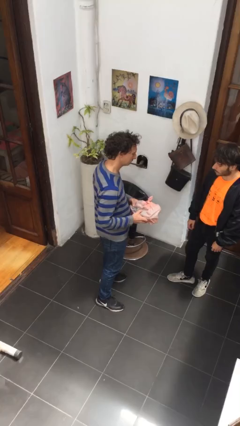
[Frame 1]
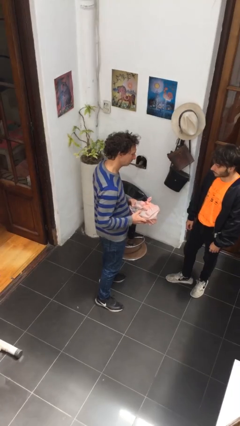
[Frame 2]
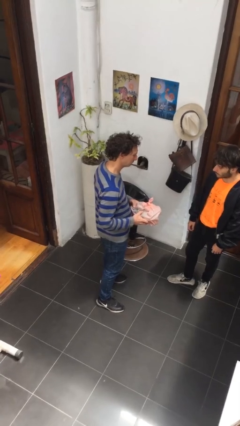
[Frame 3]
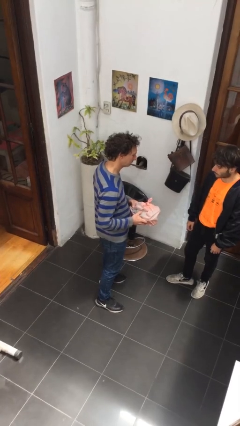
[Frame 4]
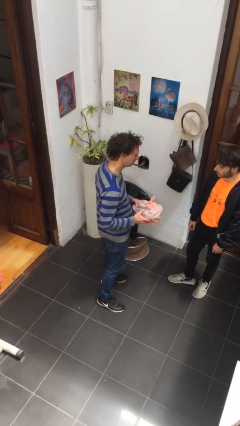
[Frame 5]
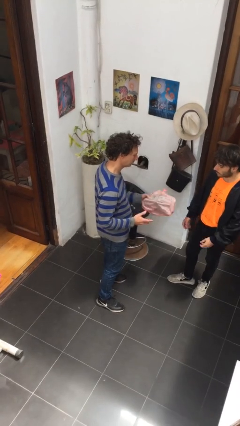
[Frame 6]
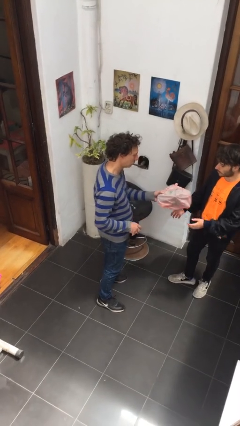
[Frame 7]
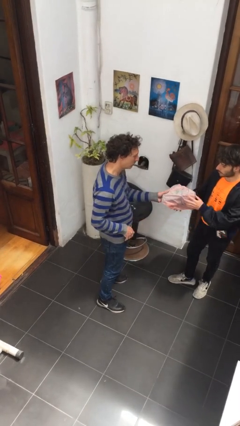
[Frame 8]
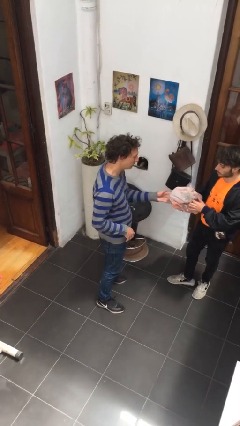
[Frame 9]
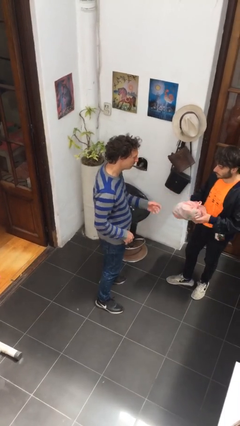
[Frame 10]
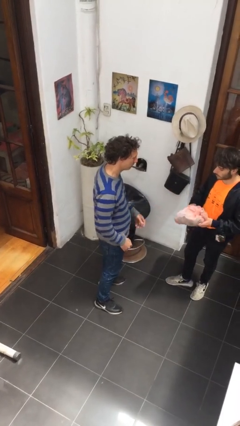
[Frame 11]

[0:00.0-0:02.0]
person transfers object to person

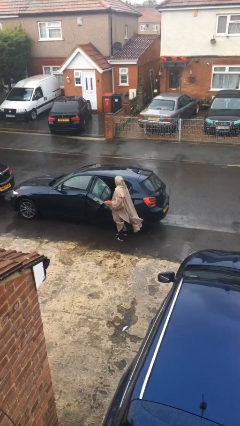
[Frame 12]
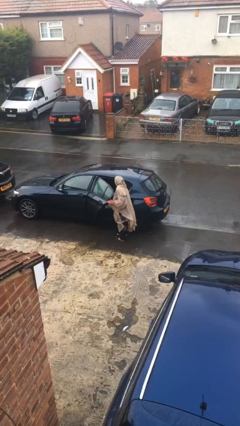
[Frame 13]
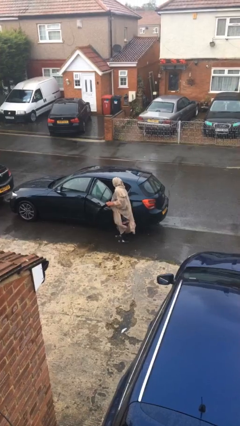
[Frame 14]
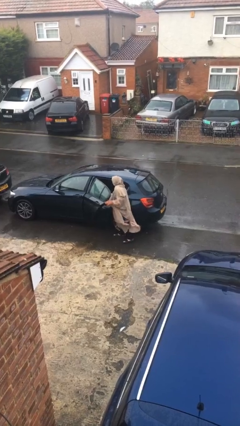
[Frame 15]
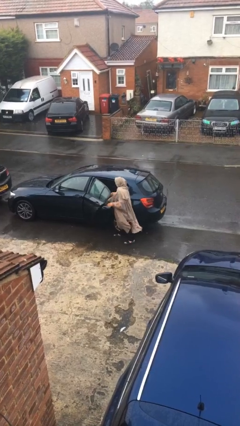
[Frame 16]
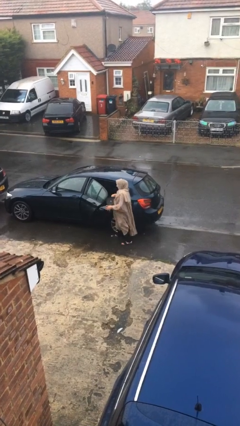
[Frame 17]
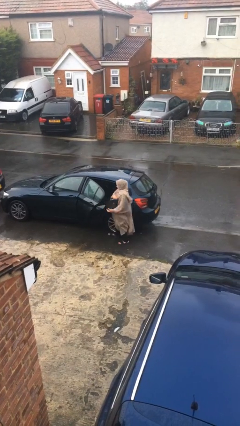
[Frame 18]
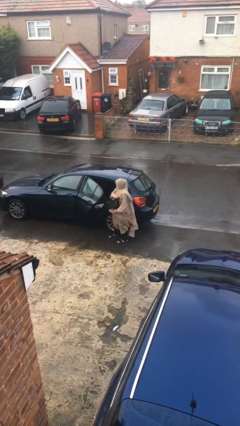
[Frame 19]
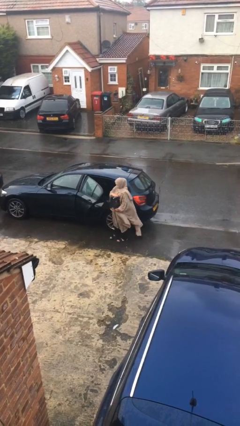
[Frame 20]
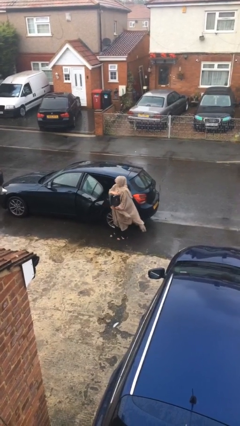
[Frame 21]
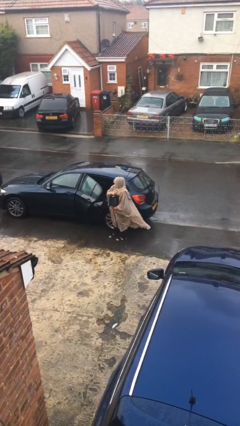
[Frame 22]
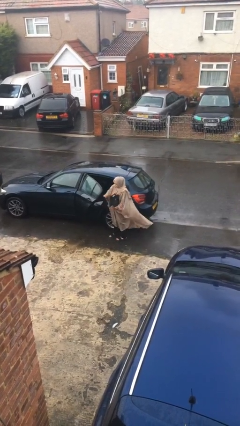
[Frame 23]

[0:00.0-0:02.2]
person unloads car

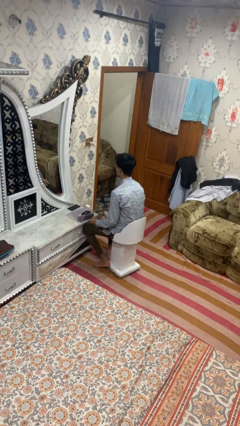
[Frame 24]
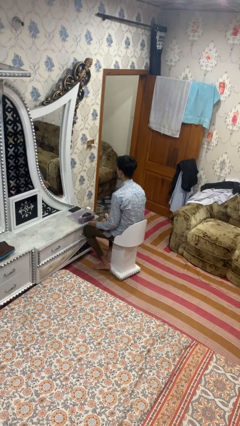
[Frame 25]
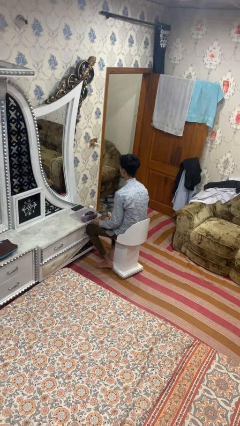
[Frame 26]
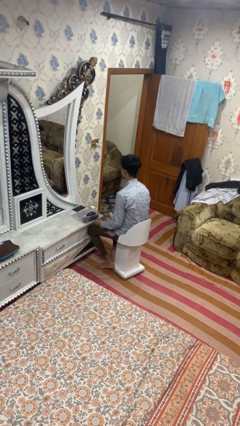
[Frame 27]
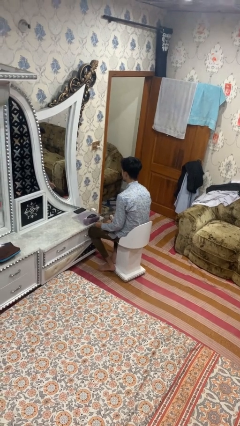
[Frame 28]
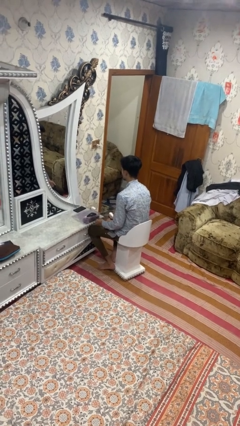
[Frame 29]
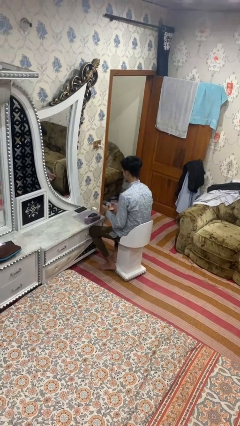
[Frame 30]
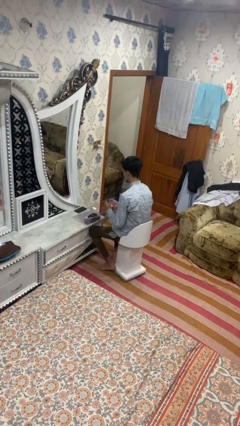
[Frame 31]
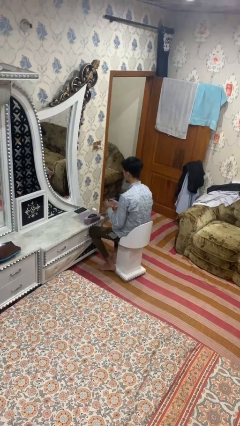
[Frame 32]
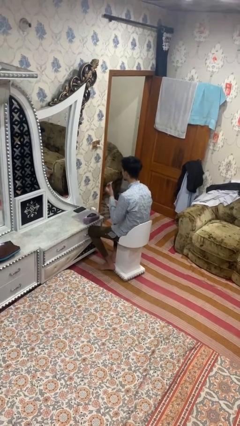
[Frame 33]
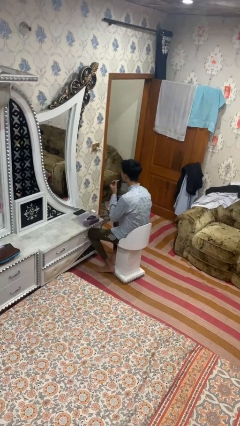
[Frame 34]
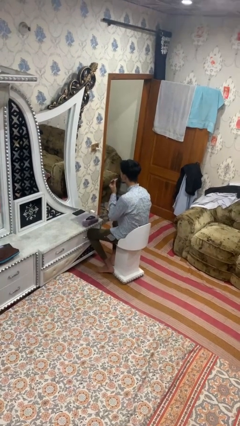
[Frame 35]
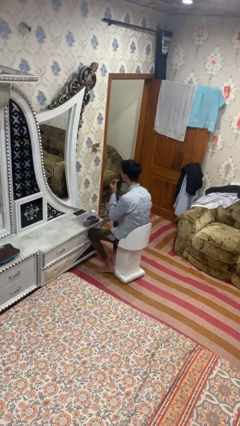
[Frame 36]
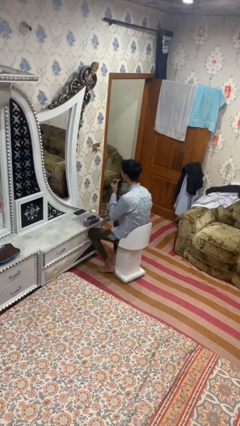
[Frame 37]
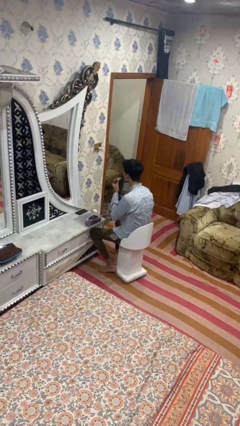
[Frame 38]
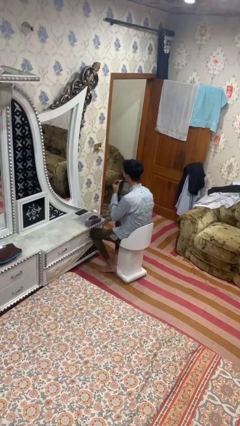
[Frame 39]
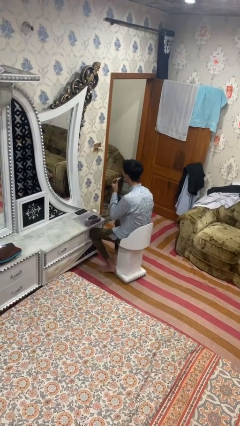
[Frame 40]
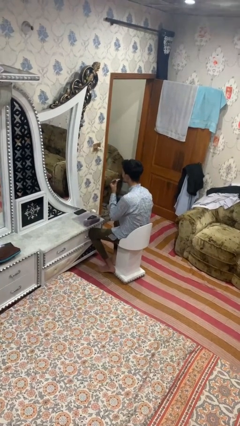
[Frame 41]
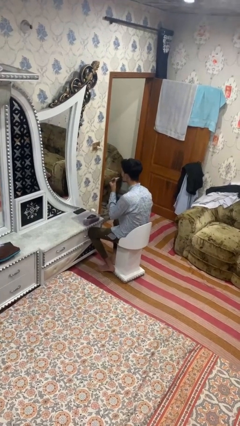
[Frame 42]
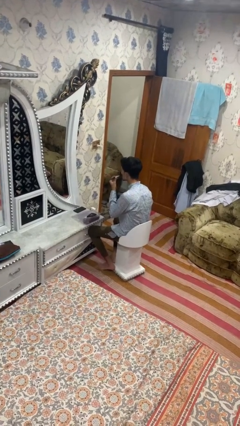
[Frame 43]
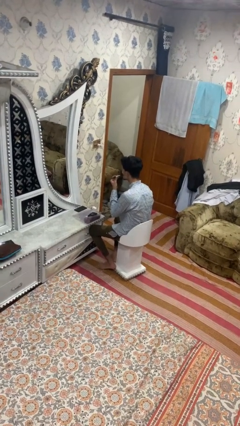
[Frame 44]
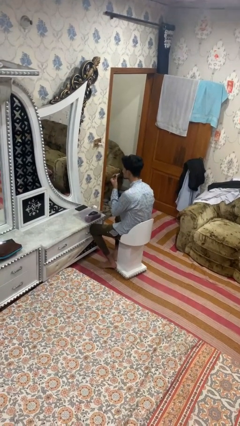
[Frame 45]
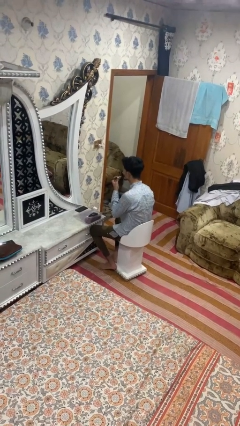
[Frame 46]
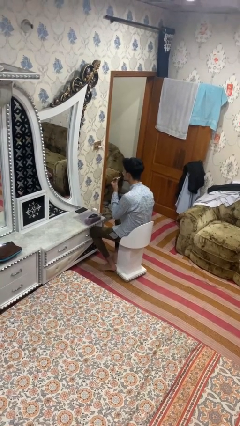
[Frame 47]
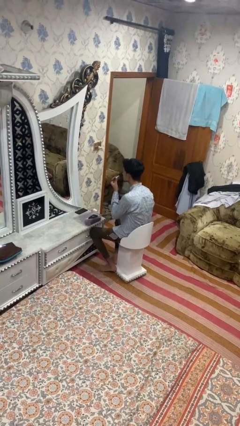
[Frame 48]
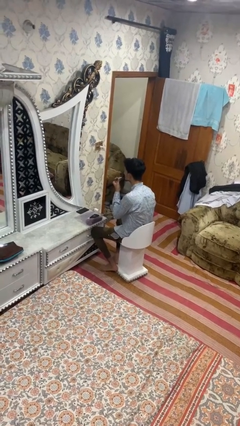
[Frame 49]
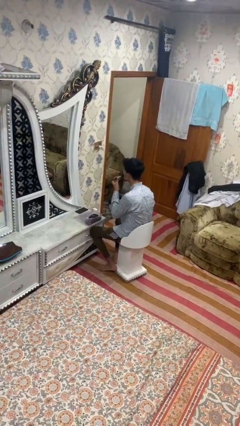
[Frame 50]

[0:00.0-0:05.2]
person applies foundation makeup

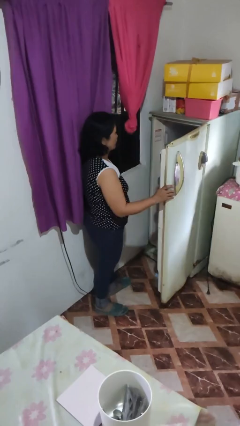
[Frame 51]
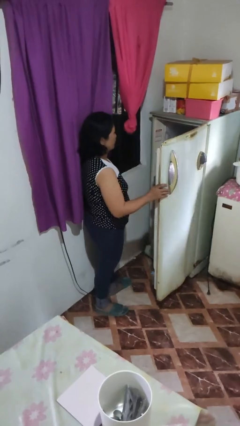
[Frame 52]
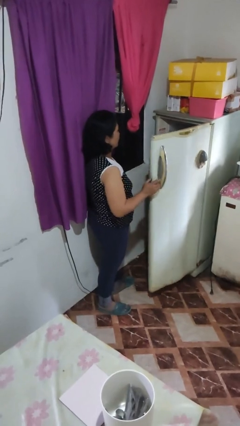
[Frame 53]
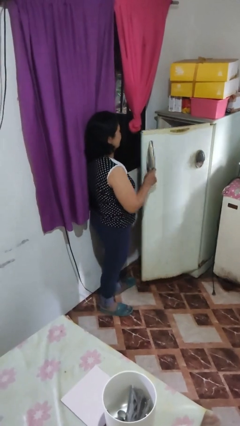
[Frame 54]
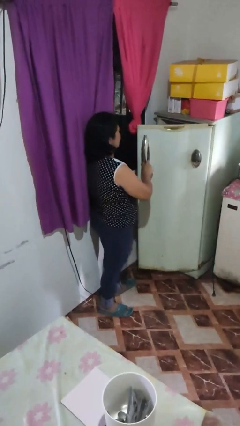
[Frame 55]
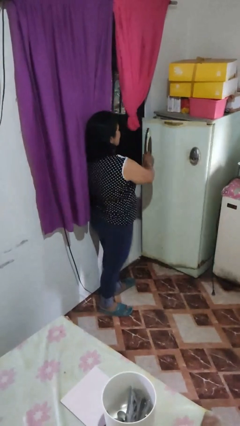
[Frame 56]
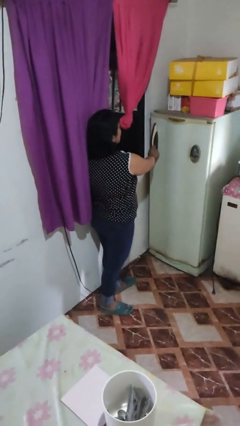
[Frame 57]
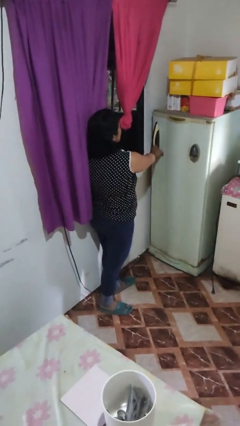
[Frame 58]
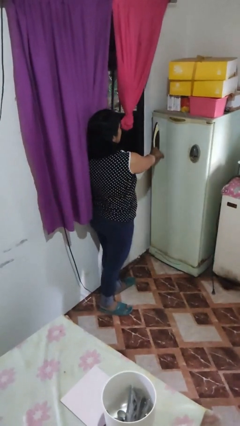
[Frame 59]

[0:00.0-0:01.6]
person closes refrigerator

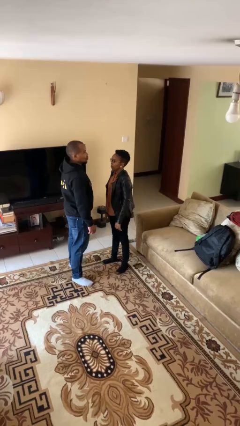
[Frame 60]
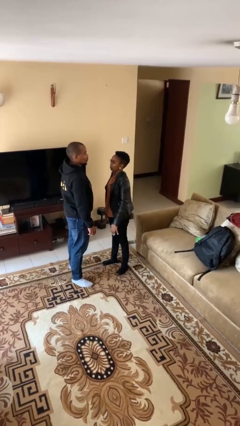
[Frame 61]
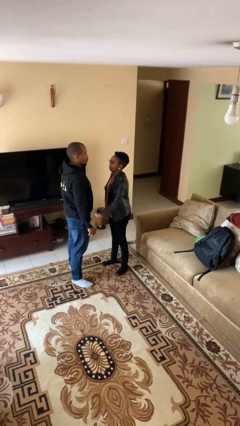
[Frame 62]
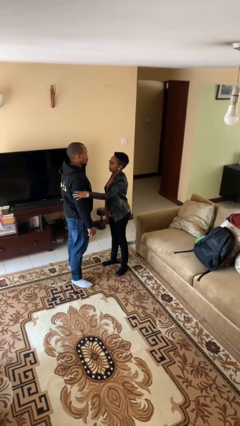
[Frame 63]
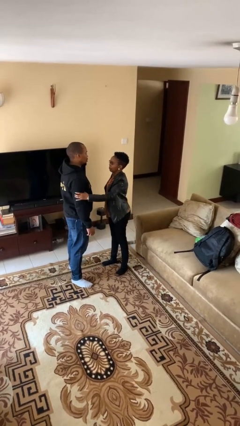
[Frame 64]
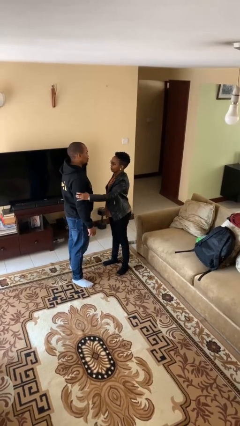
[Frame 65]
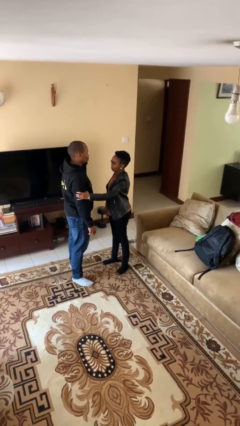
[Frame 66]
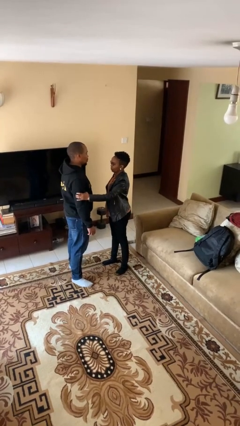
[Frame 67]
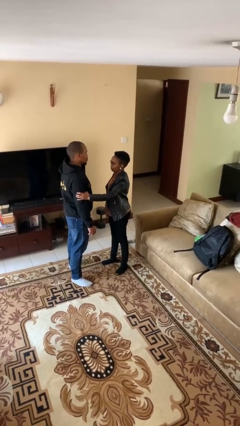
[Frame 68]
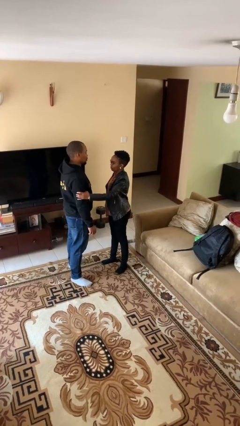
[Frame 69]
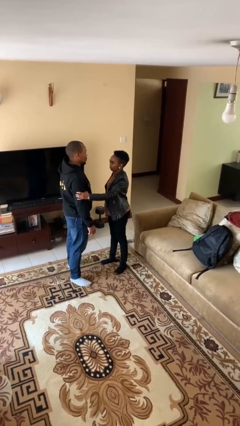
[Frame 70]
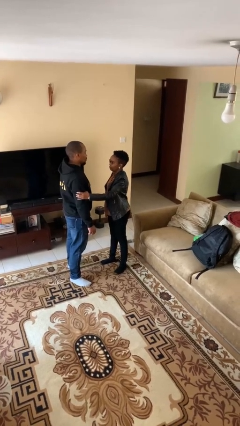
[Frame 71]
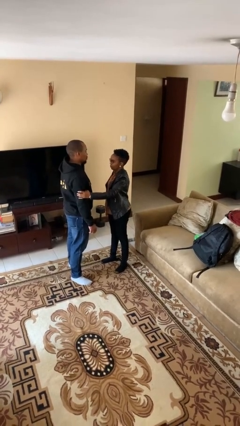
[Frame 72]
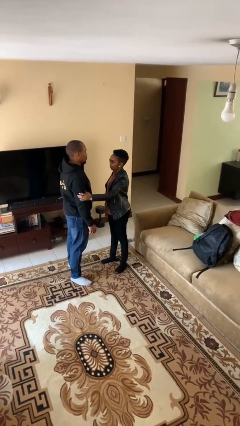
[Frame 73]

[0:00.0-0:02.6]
person grabs person by bicep

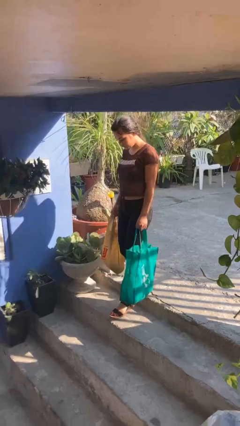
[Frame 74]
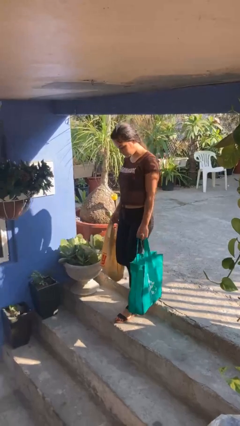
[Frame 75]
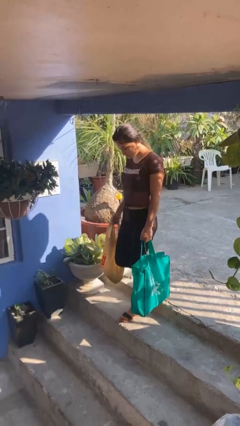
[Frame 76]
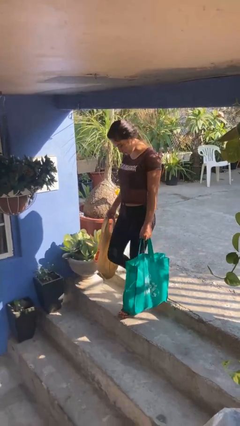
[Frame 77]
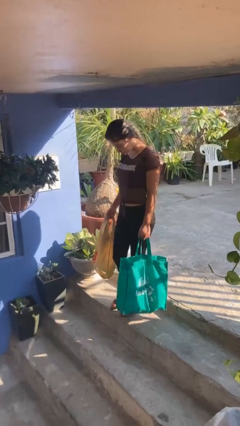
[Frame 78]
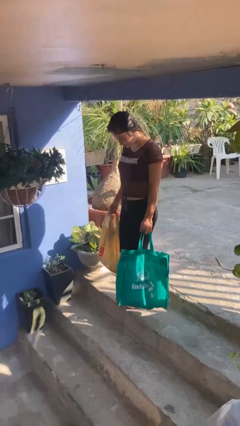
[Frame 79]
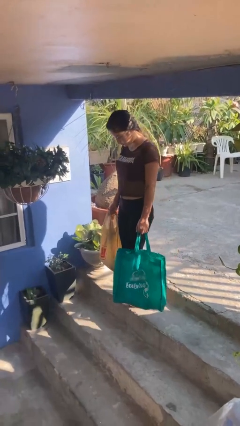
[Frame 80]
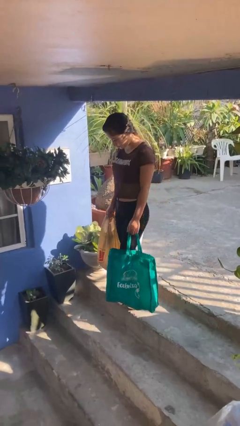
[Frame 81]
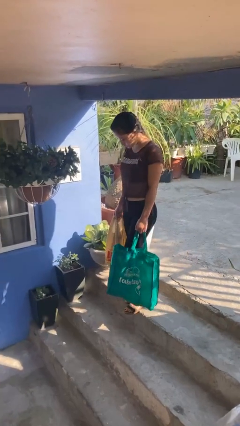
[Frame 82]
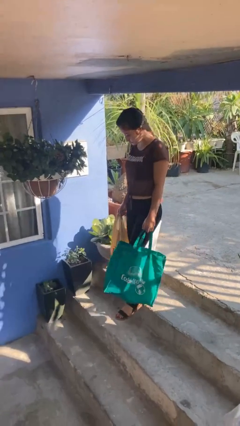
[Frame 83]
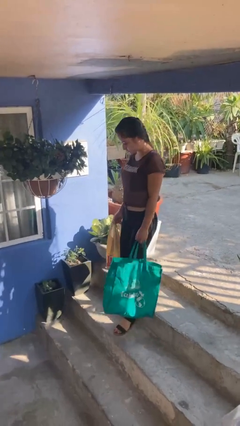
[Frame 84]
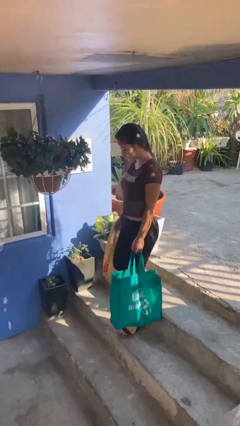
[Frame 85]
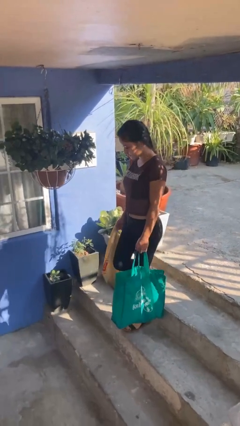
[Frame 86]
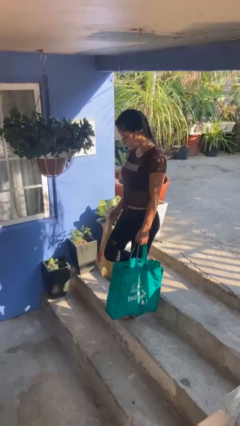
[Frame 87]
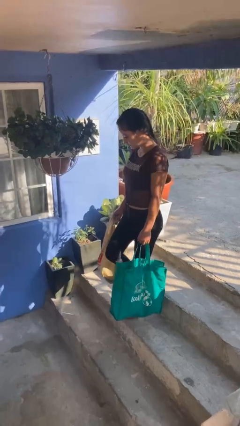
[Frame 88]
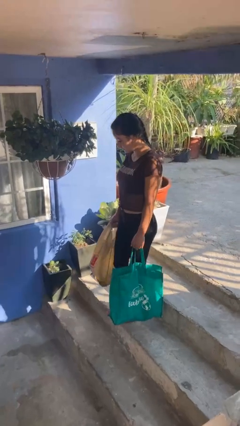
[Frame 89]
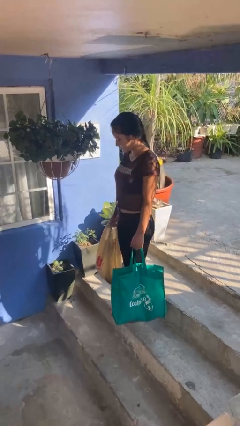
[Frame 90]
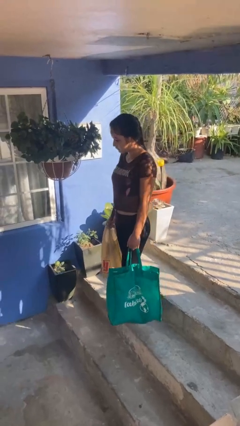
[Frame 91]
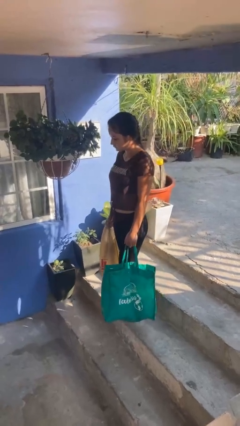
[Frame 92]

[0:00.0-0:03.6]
person carries groceries

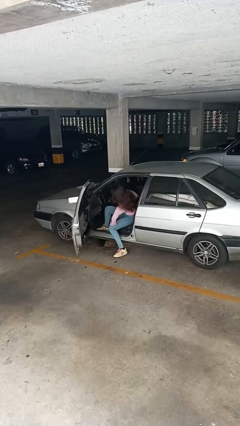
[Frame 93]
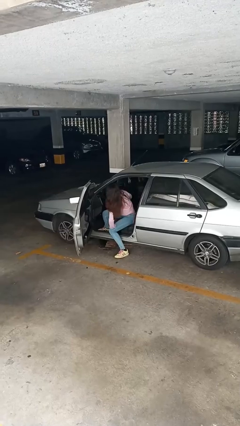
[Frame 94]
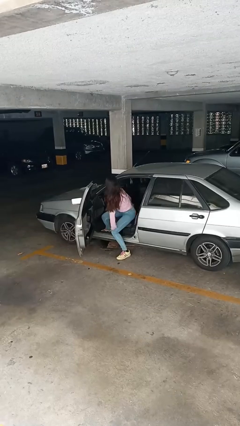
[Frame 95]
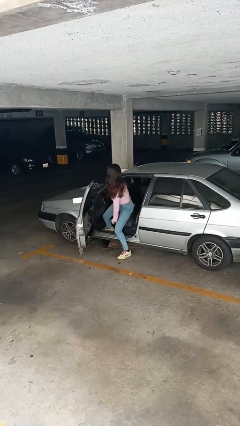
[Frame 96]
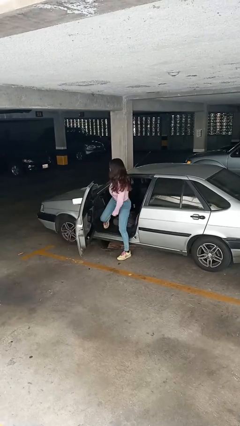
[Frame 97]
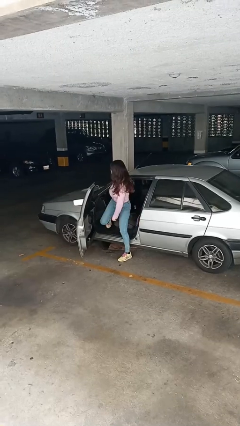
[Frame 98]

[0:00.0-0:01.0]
person exits car
